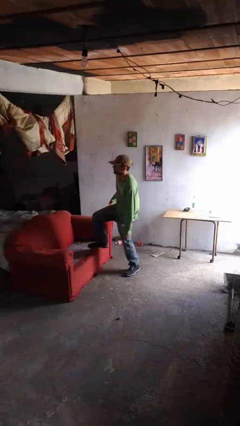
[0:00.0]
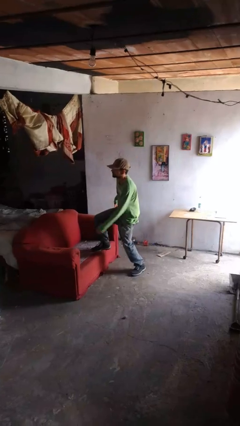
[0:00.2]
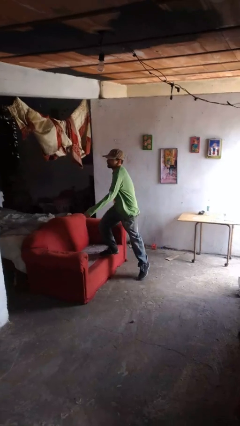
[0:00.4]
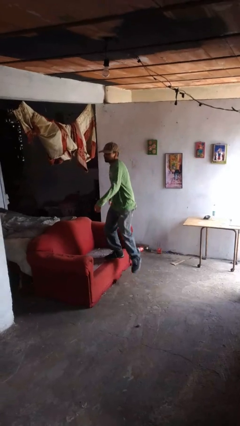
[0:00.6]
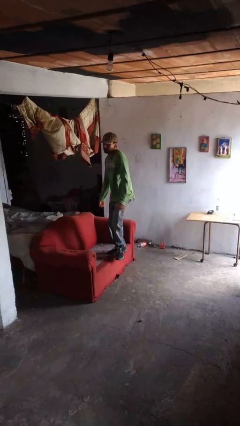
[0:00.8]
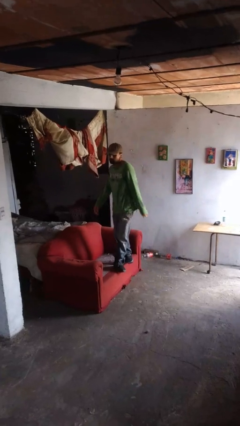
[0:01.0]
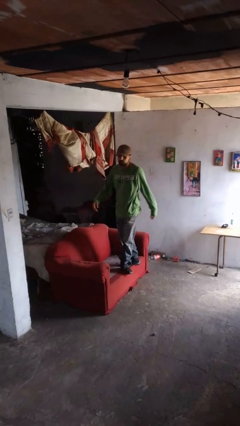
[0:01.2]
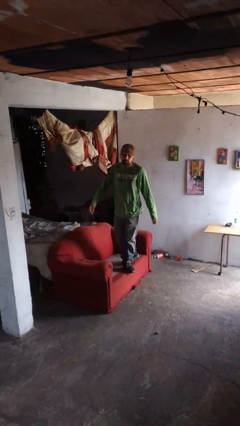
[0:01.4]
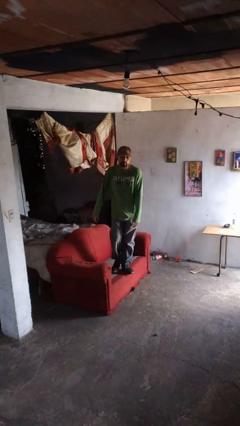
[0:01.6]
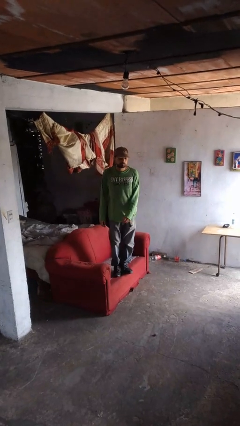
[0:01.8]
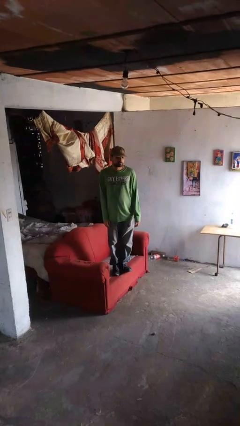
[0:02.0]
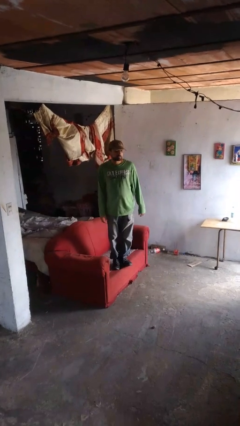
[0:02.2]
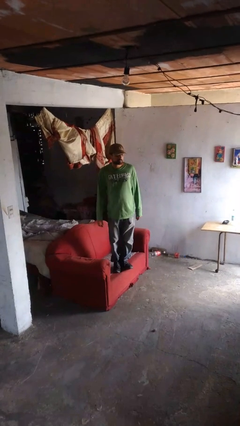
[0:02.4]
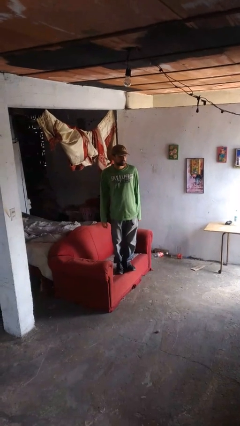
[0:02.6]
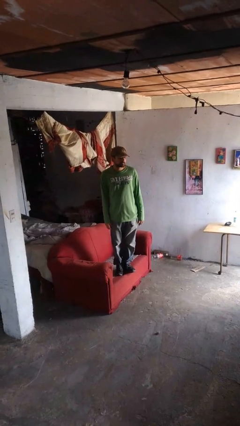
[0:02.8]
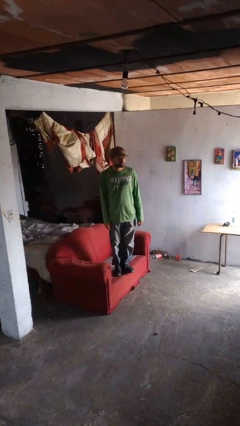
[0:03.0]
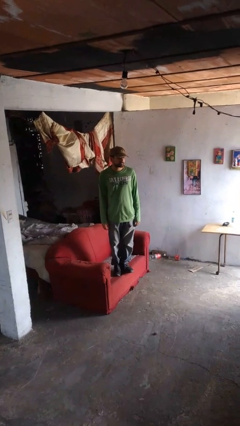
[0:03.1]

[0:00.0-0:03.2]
person climbs on couch

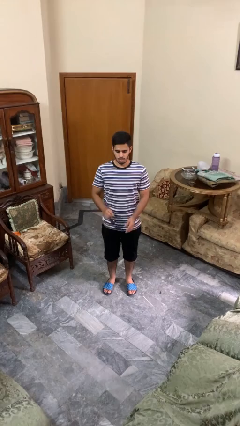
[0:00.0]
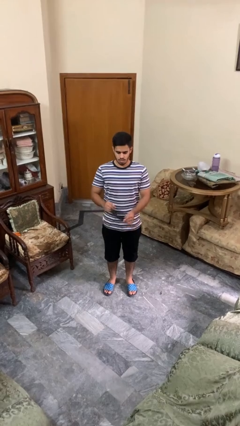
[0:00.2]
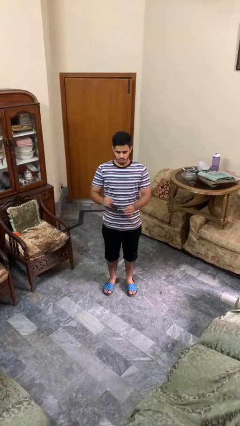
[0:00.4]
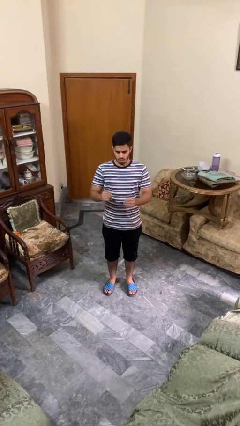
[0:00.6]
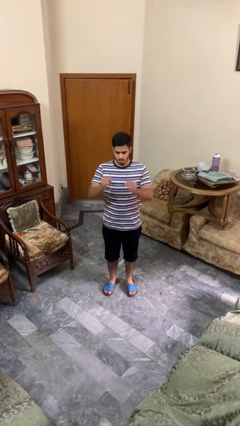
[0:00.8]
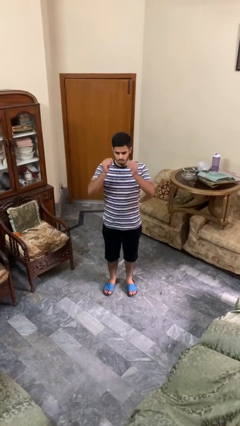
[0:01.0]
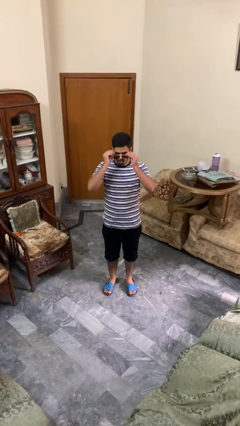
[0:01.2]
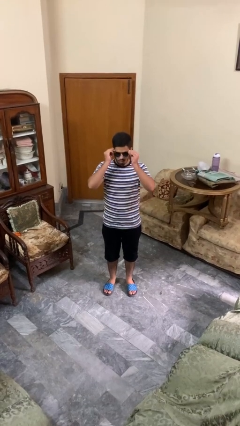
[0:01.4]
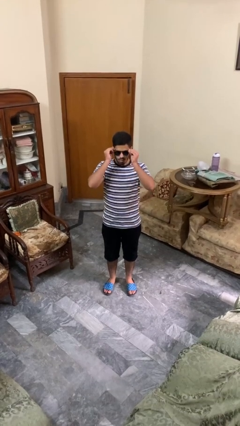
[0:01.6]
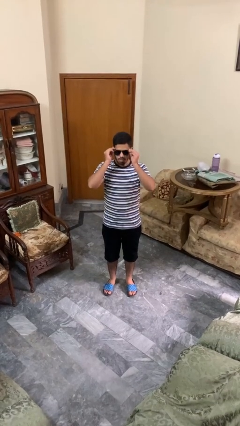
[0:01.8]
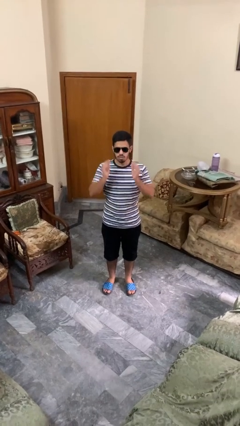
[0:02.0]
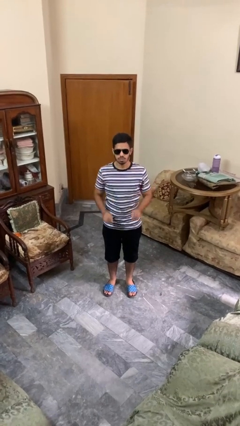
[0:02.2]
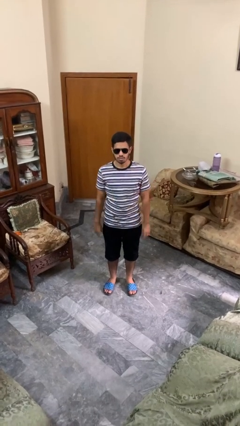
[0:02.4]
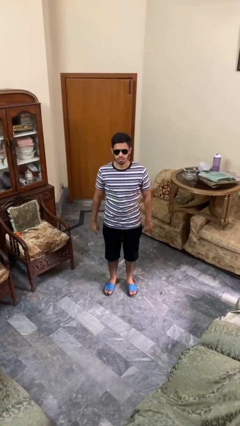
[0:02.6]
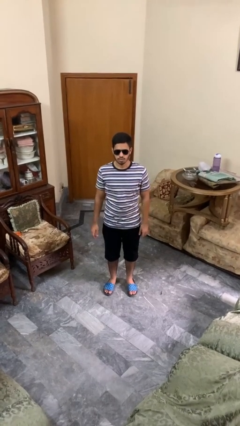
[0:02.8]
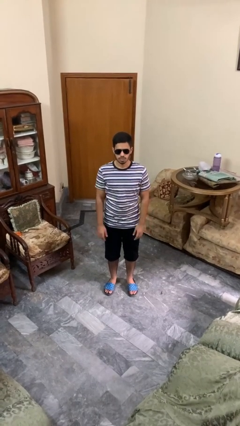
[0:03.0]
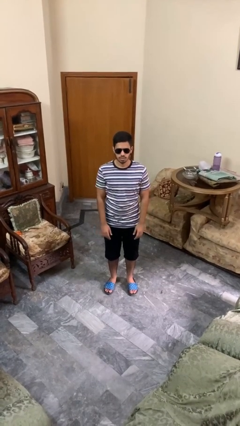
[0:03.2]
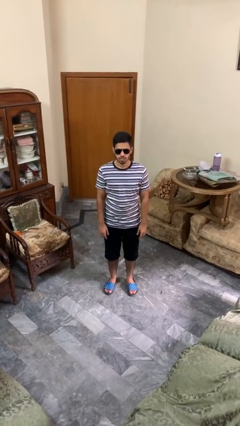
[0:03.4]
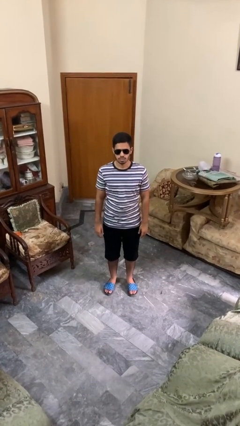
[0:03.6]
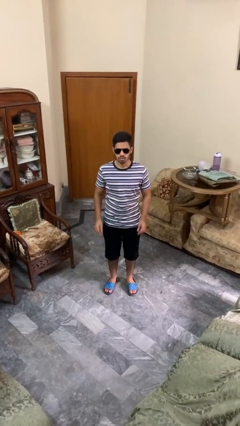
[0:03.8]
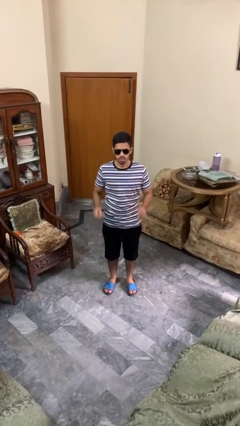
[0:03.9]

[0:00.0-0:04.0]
person puts on sunglasses

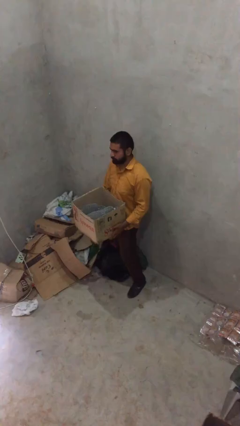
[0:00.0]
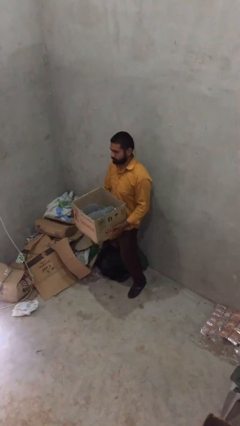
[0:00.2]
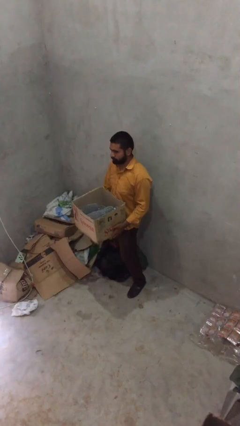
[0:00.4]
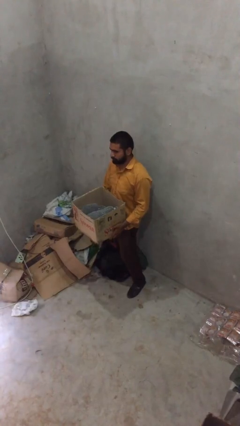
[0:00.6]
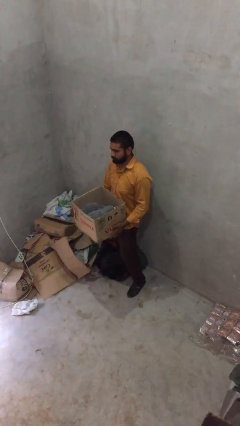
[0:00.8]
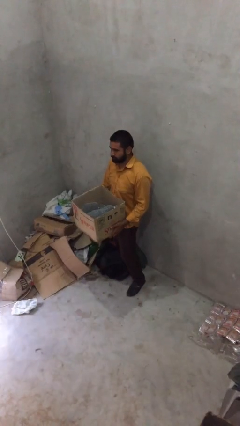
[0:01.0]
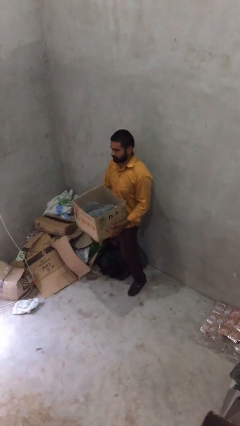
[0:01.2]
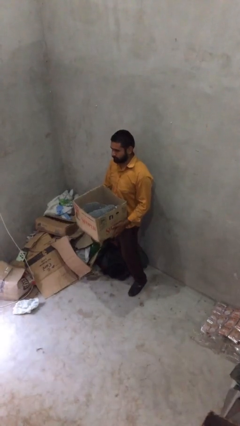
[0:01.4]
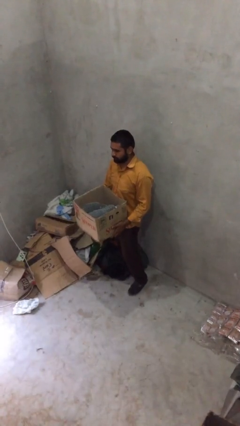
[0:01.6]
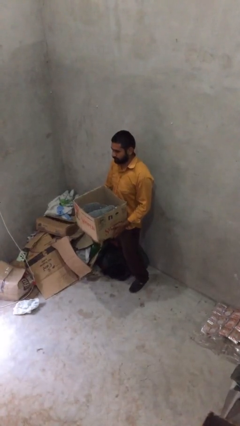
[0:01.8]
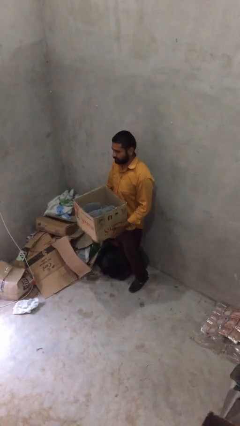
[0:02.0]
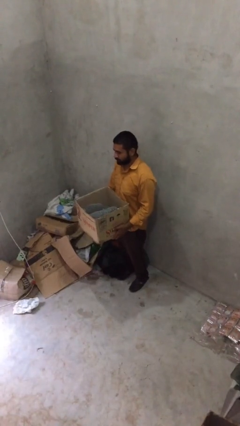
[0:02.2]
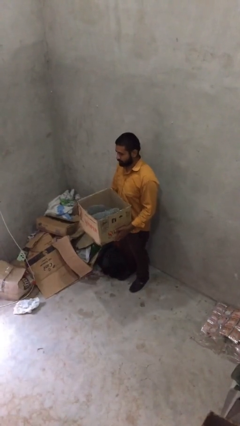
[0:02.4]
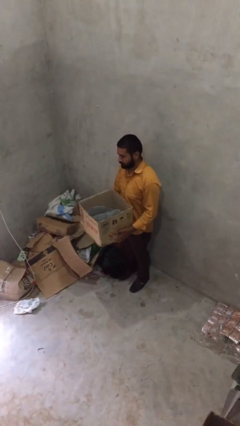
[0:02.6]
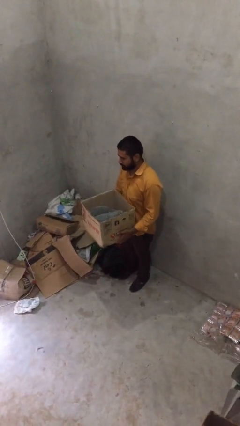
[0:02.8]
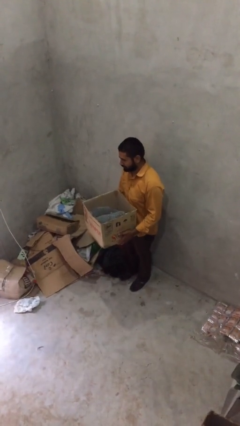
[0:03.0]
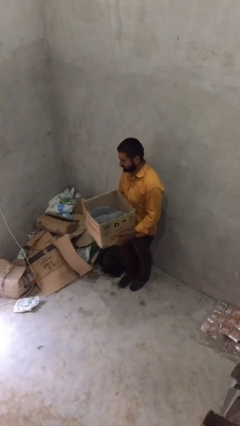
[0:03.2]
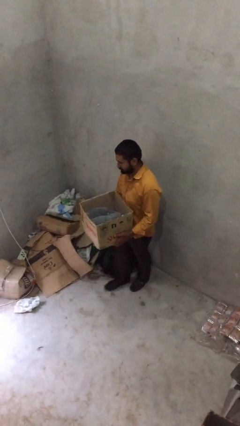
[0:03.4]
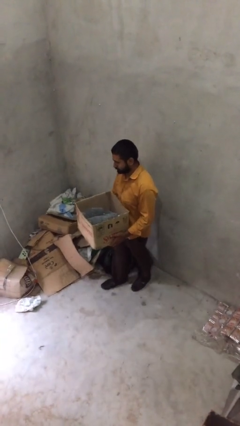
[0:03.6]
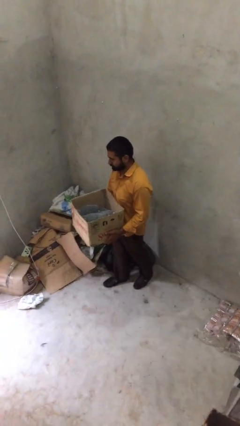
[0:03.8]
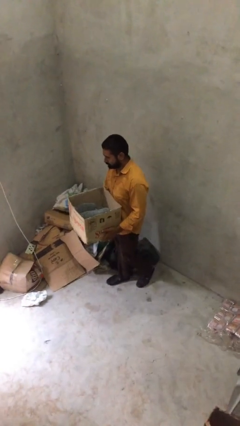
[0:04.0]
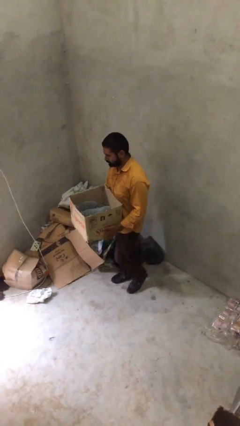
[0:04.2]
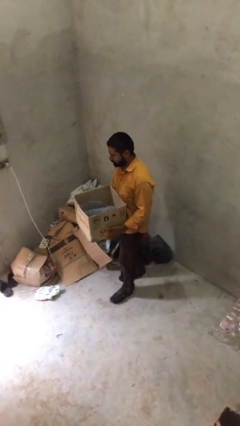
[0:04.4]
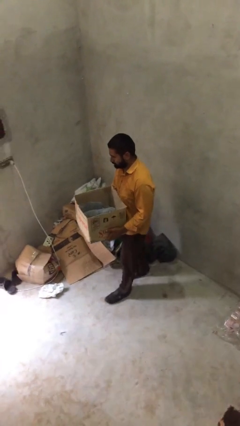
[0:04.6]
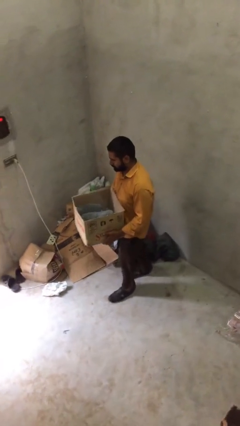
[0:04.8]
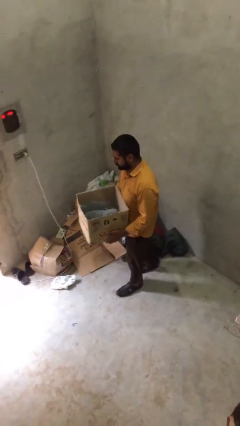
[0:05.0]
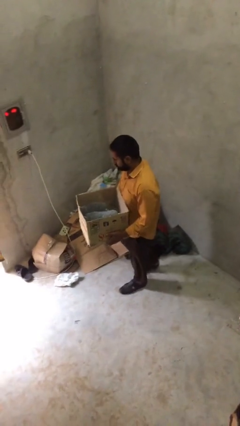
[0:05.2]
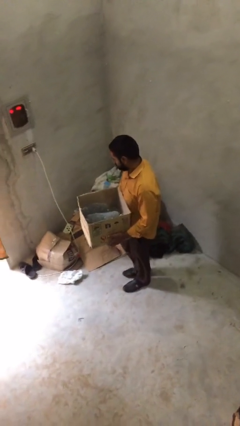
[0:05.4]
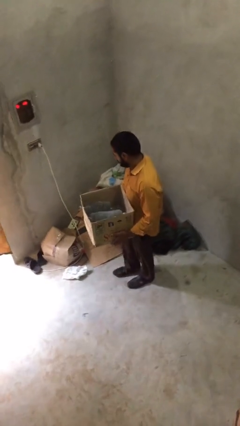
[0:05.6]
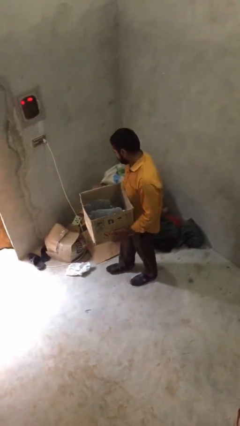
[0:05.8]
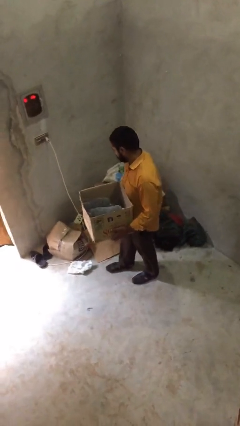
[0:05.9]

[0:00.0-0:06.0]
person carries heavy object

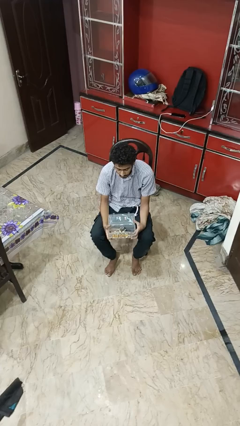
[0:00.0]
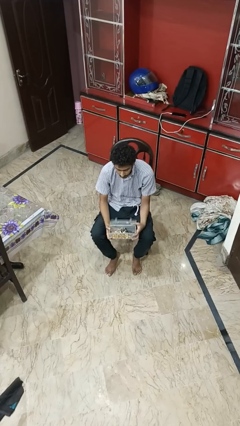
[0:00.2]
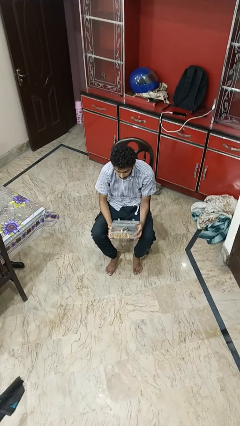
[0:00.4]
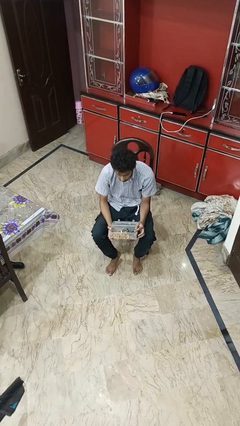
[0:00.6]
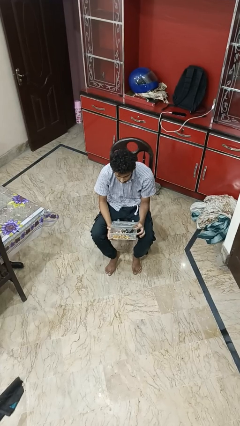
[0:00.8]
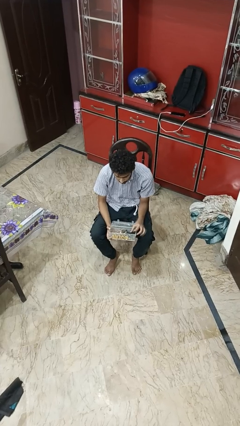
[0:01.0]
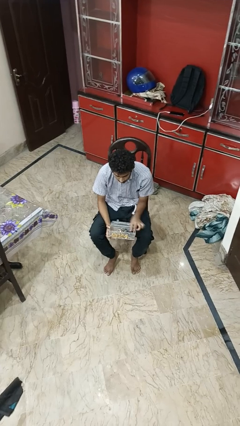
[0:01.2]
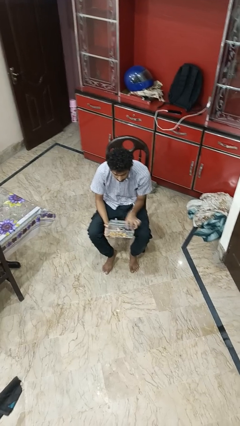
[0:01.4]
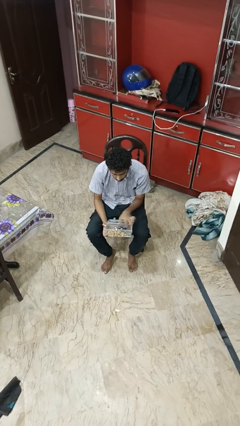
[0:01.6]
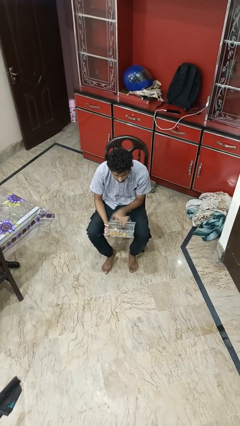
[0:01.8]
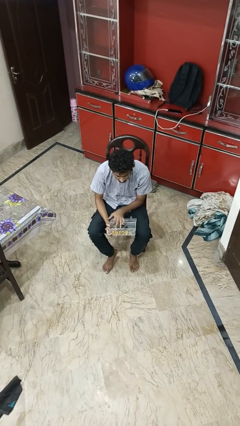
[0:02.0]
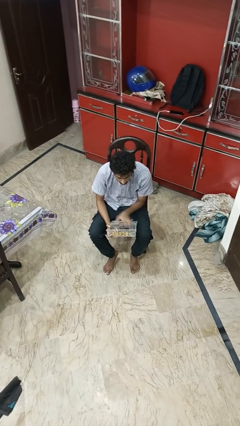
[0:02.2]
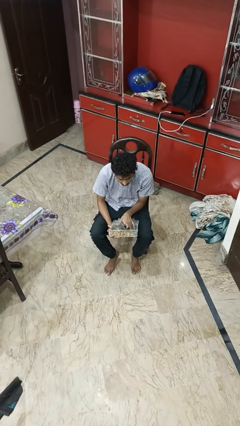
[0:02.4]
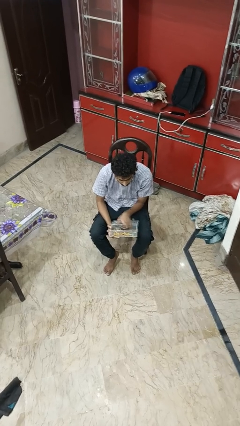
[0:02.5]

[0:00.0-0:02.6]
person opens jewelry box

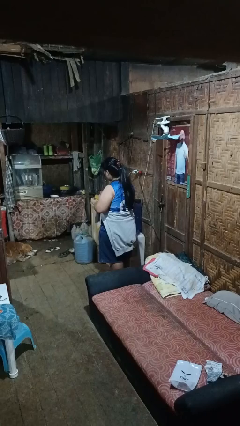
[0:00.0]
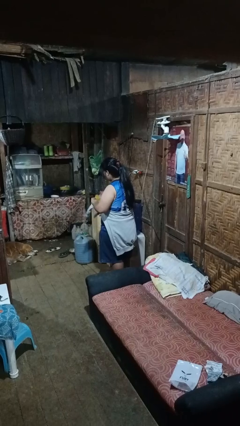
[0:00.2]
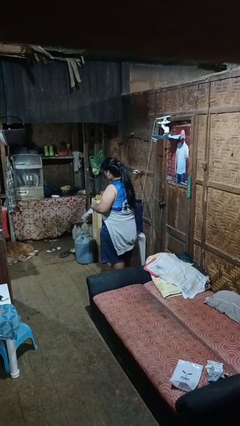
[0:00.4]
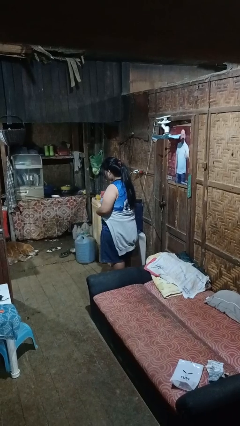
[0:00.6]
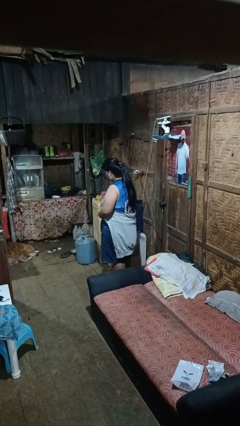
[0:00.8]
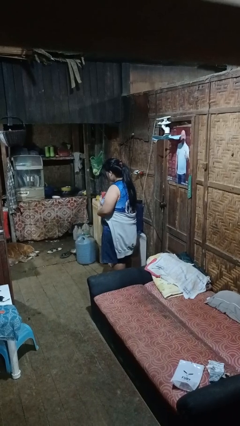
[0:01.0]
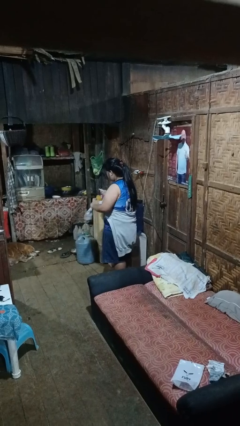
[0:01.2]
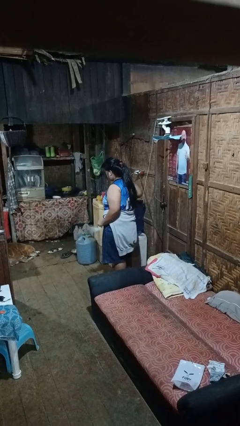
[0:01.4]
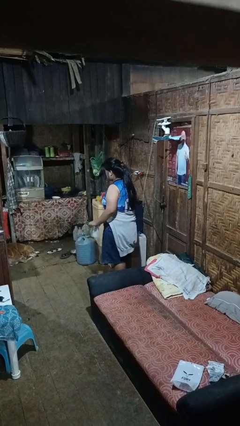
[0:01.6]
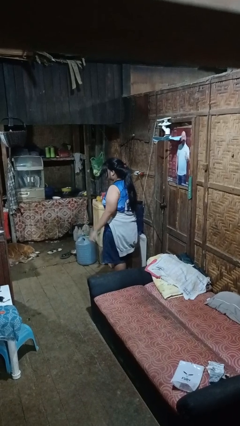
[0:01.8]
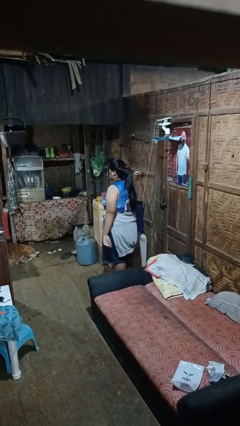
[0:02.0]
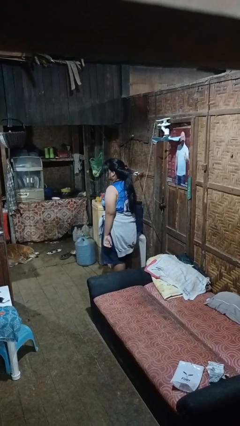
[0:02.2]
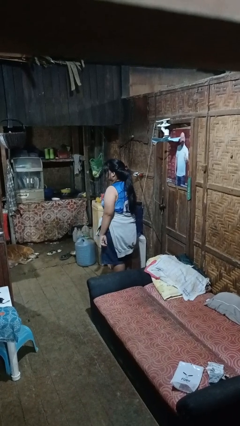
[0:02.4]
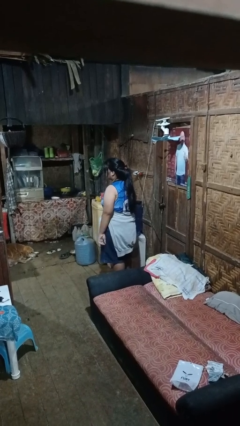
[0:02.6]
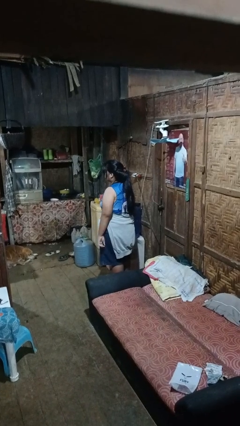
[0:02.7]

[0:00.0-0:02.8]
person ties jacket around waist
